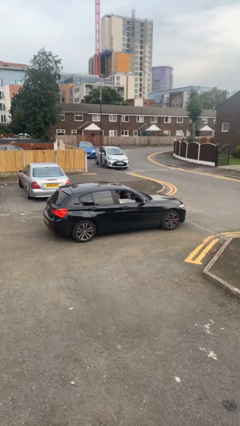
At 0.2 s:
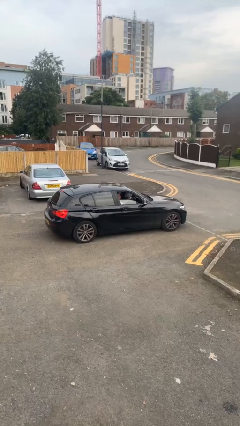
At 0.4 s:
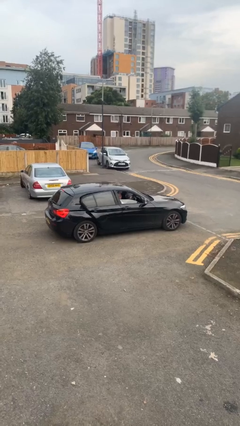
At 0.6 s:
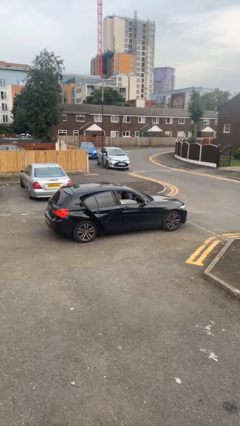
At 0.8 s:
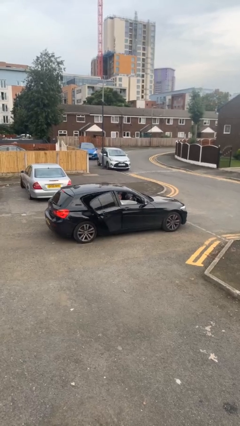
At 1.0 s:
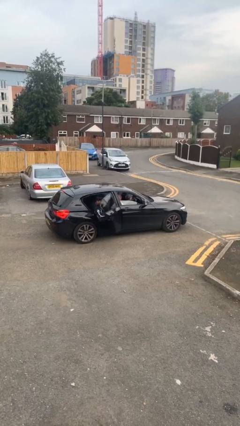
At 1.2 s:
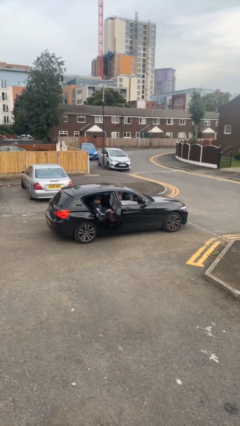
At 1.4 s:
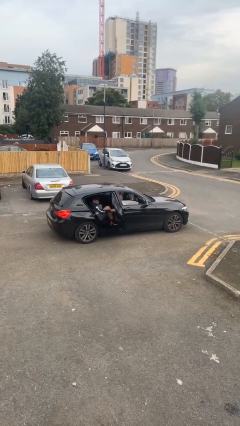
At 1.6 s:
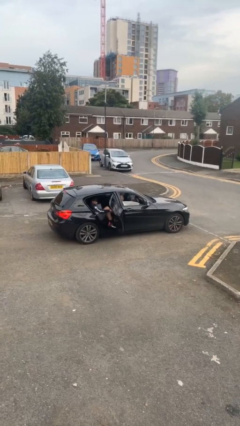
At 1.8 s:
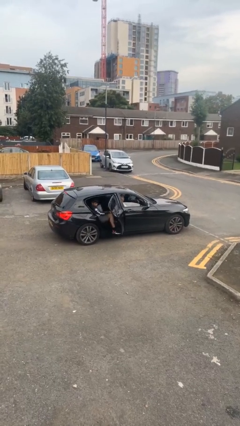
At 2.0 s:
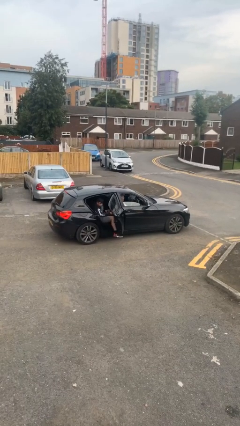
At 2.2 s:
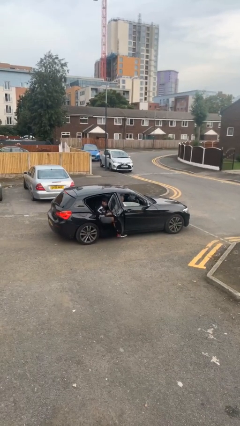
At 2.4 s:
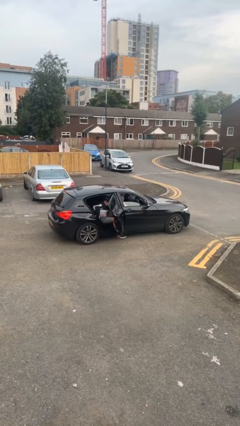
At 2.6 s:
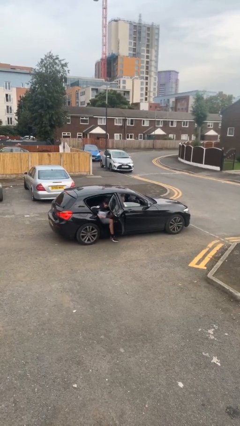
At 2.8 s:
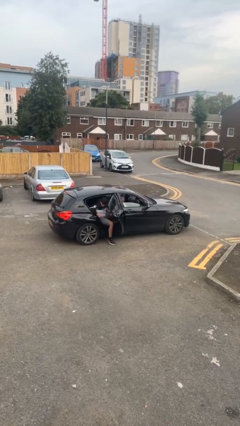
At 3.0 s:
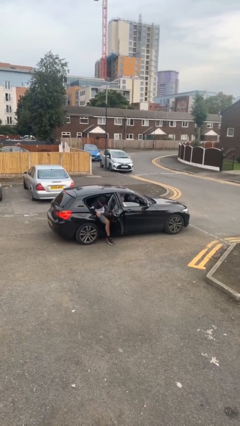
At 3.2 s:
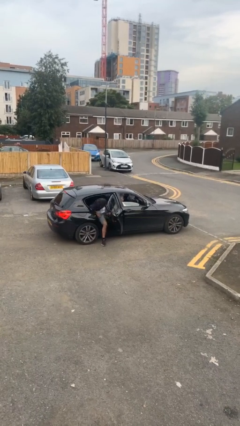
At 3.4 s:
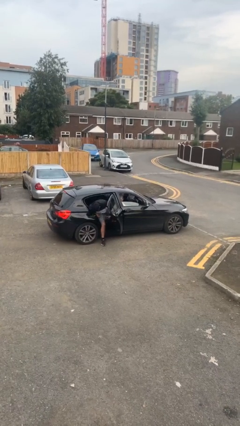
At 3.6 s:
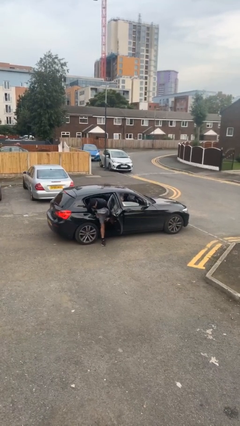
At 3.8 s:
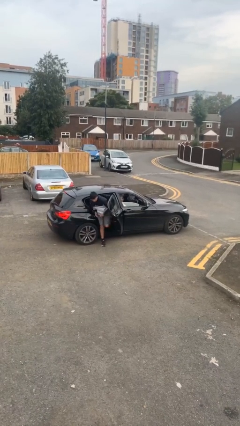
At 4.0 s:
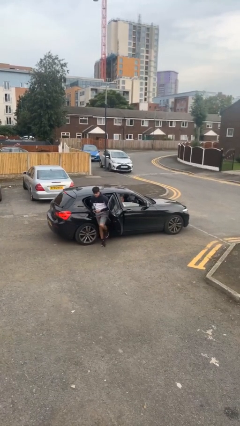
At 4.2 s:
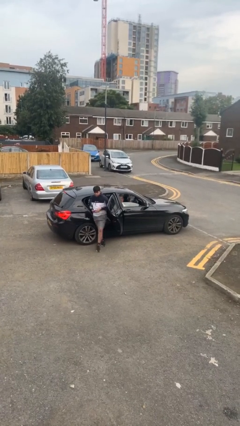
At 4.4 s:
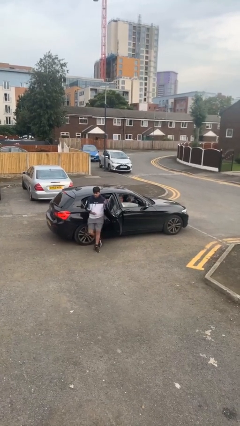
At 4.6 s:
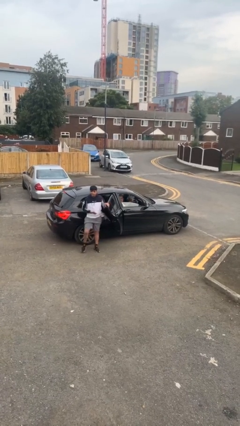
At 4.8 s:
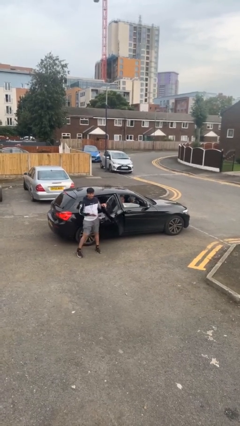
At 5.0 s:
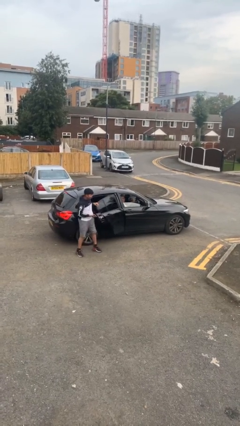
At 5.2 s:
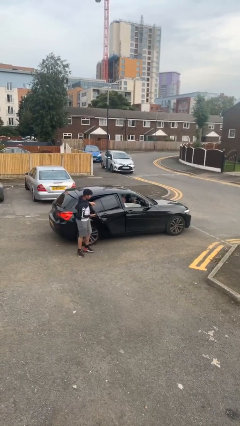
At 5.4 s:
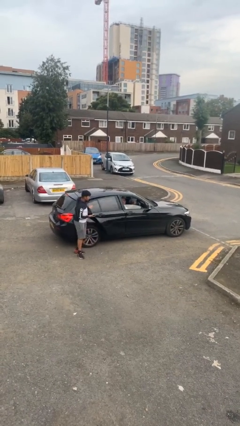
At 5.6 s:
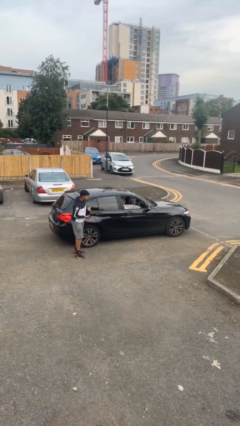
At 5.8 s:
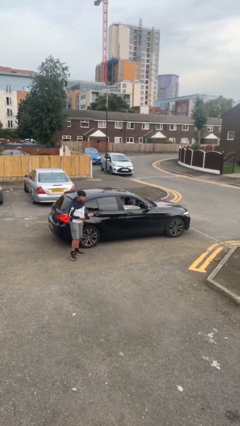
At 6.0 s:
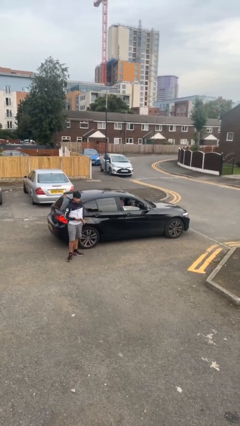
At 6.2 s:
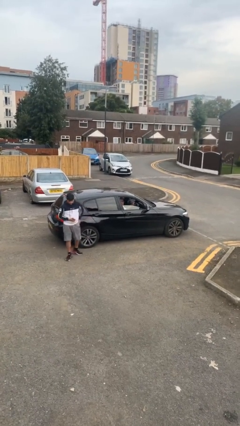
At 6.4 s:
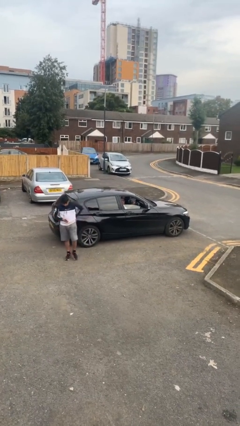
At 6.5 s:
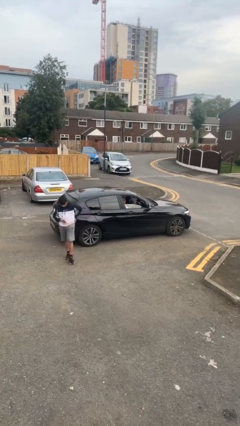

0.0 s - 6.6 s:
car drops off person

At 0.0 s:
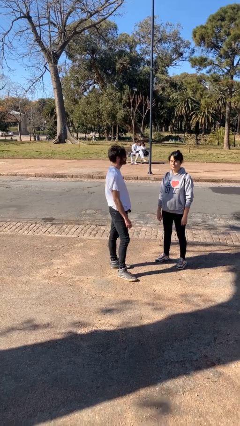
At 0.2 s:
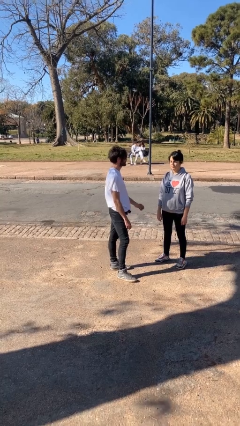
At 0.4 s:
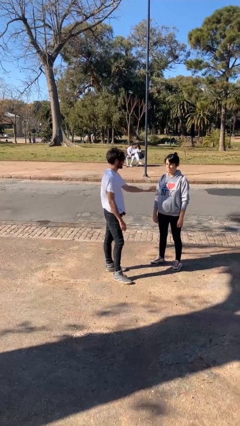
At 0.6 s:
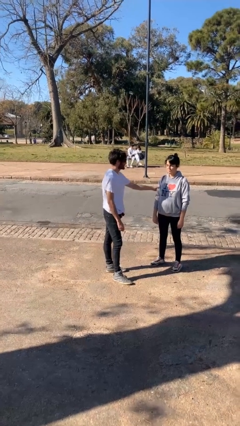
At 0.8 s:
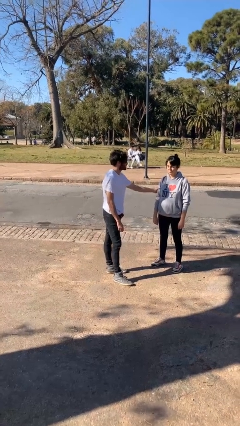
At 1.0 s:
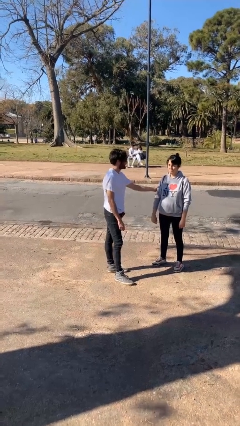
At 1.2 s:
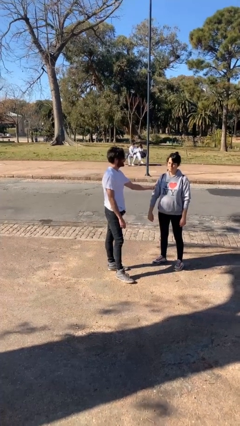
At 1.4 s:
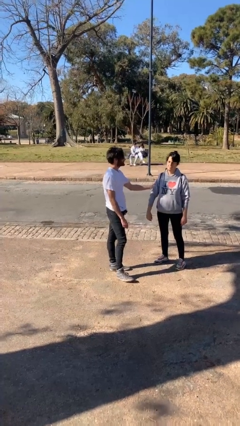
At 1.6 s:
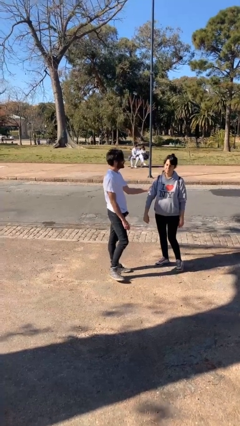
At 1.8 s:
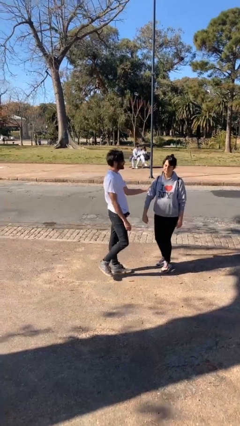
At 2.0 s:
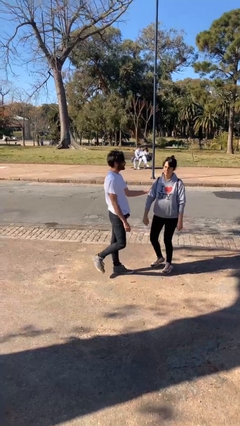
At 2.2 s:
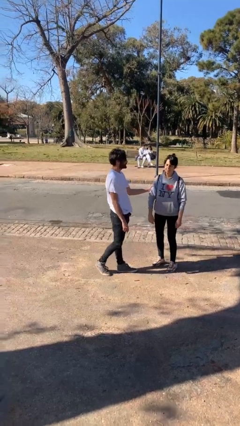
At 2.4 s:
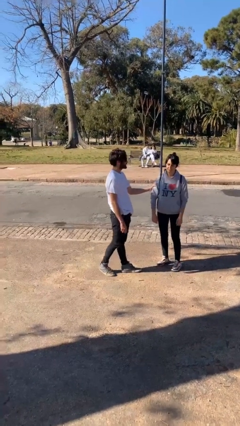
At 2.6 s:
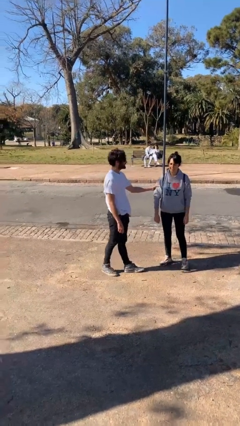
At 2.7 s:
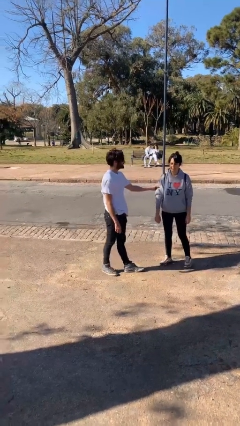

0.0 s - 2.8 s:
person grabs person by bicep

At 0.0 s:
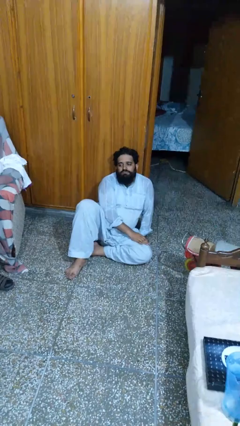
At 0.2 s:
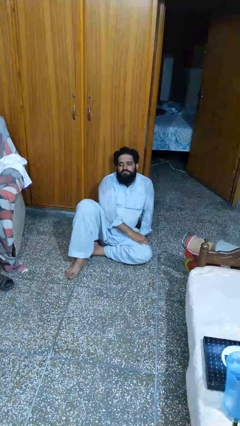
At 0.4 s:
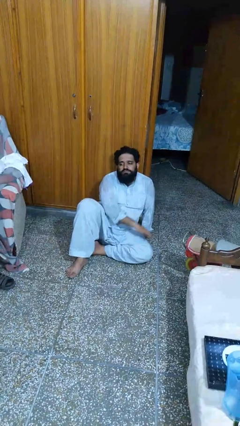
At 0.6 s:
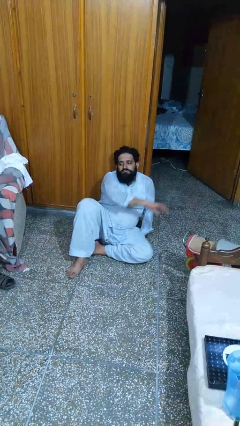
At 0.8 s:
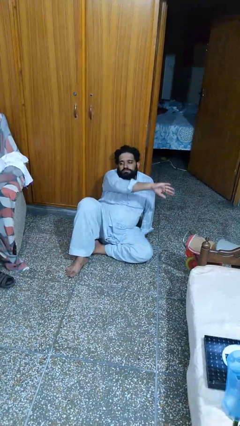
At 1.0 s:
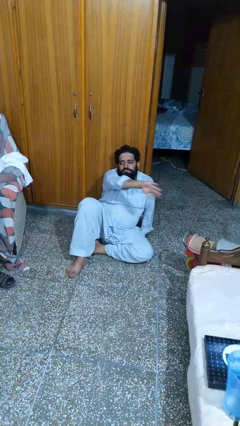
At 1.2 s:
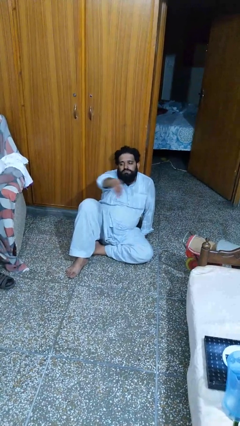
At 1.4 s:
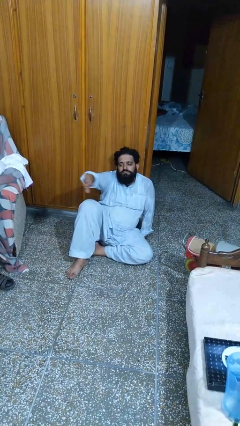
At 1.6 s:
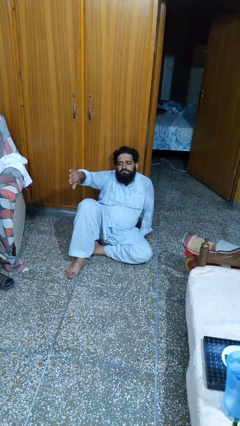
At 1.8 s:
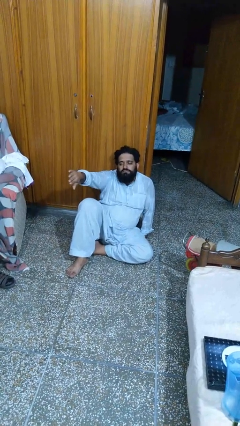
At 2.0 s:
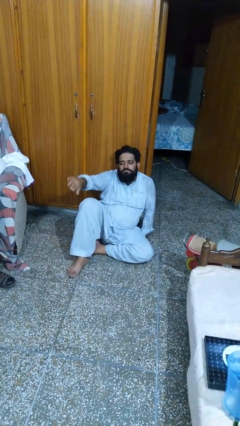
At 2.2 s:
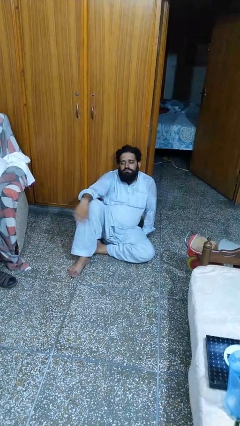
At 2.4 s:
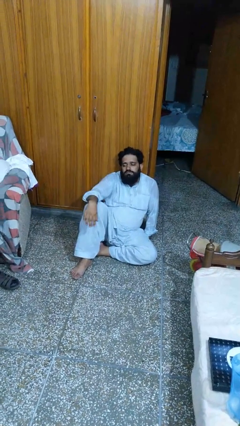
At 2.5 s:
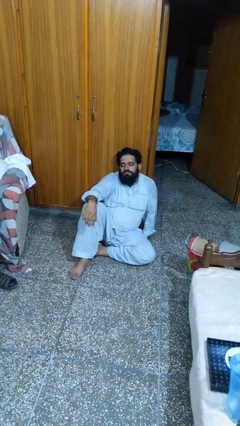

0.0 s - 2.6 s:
person gestures swipe right

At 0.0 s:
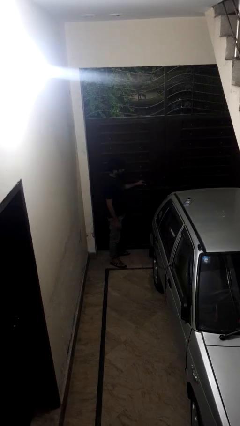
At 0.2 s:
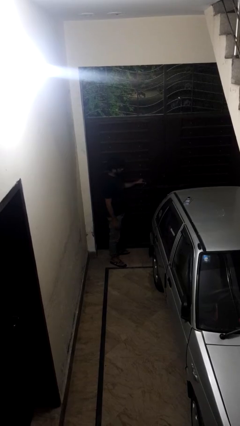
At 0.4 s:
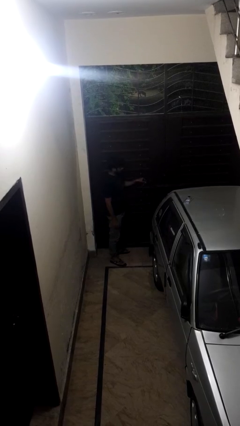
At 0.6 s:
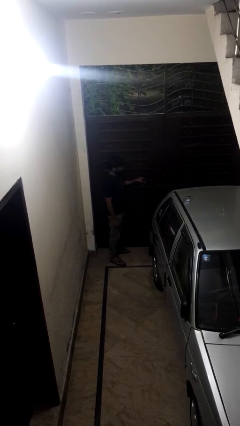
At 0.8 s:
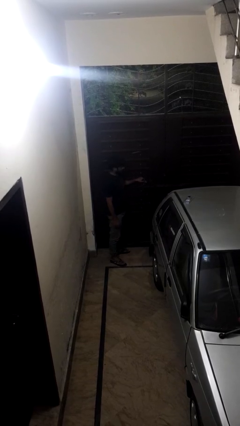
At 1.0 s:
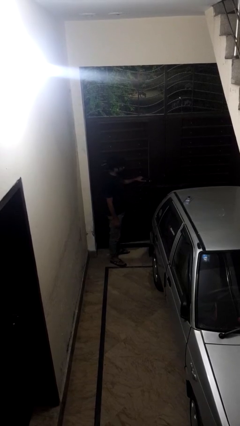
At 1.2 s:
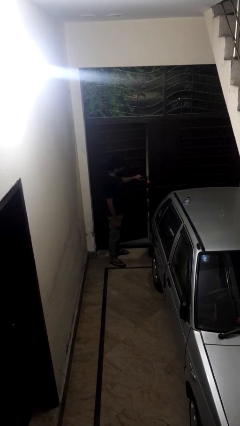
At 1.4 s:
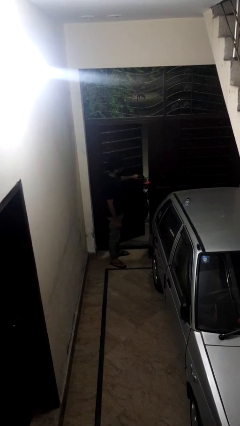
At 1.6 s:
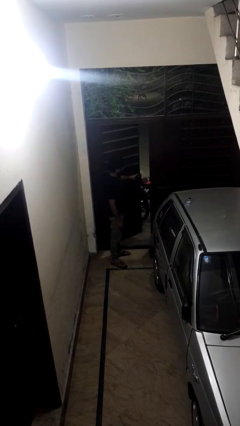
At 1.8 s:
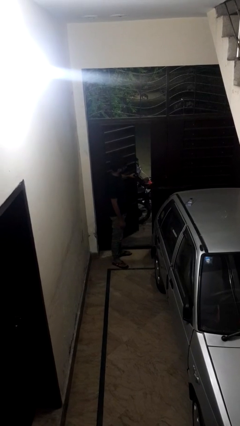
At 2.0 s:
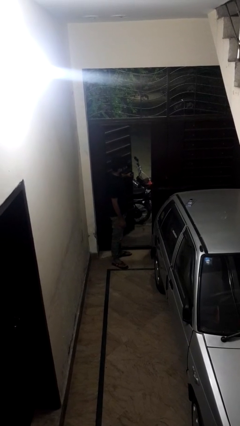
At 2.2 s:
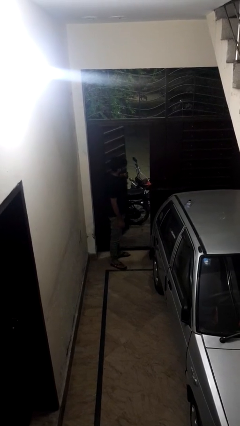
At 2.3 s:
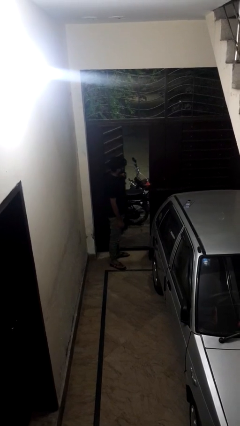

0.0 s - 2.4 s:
person opens gate

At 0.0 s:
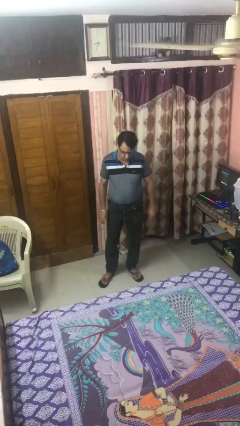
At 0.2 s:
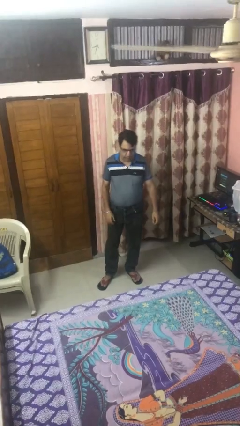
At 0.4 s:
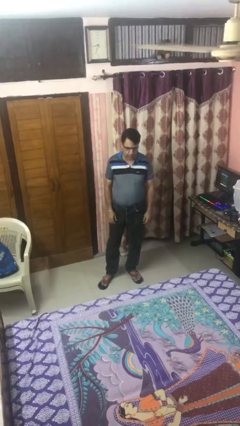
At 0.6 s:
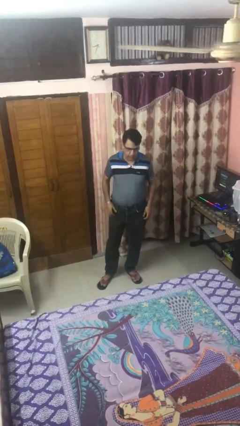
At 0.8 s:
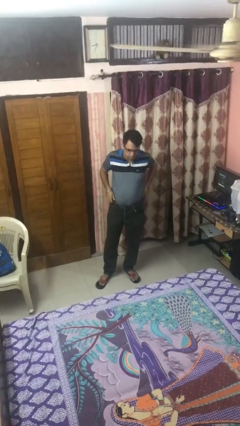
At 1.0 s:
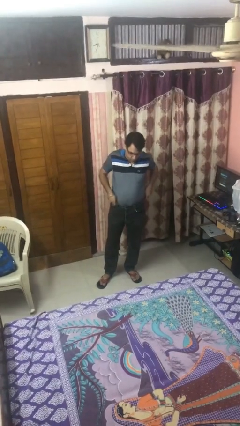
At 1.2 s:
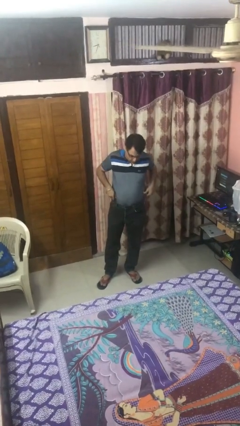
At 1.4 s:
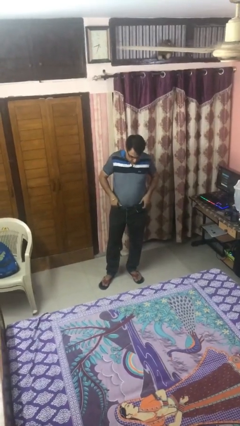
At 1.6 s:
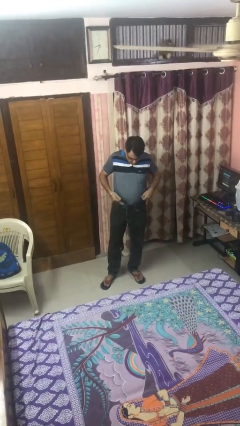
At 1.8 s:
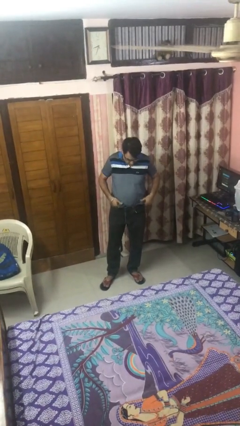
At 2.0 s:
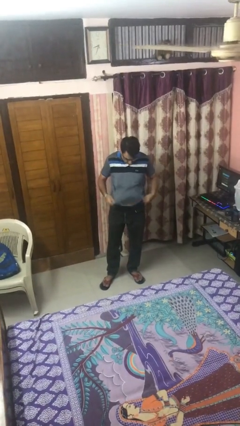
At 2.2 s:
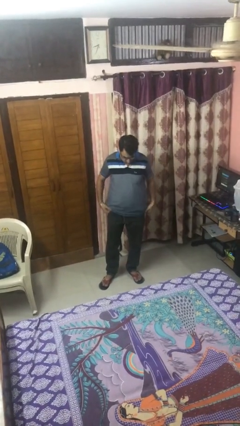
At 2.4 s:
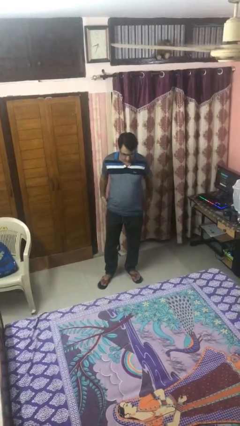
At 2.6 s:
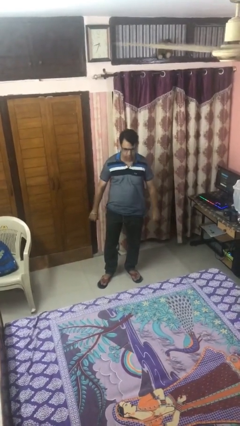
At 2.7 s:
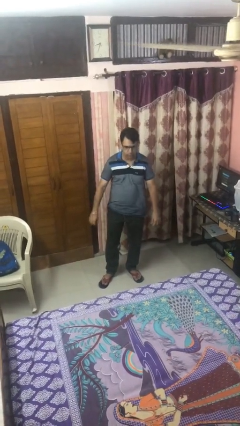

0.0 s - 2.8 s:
person untucks shirt
